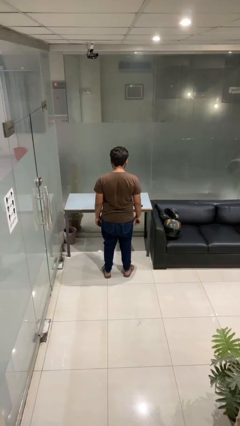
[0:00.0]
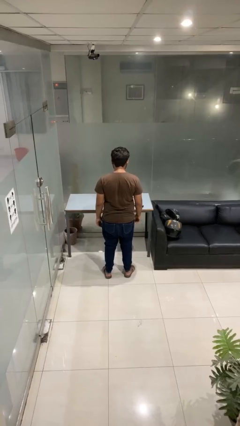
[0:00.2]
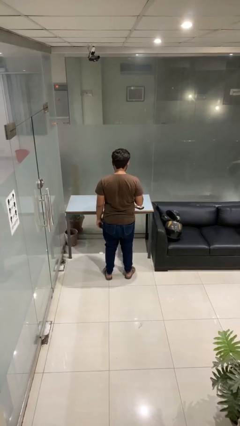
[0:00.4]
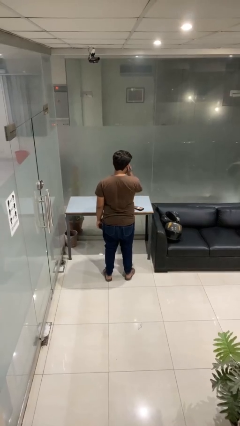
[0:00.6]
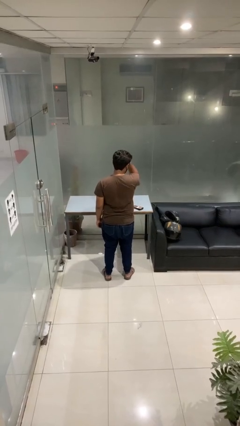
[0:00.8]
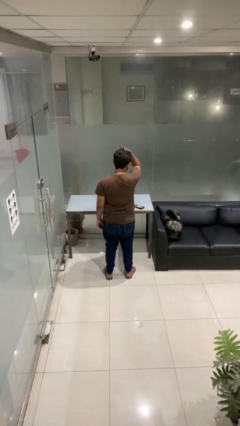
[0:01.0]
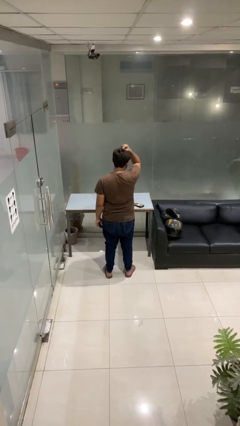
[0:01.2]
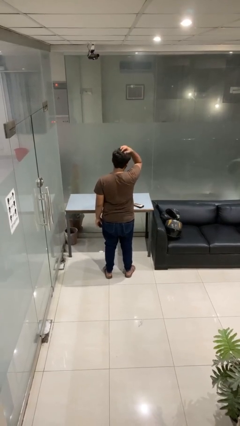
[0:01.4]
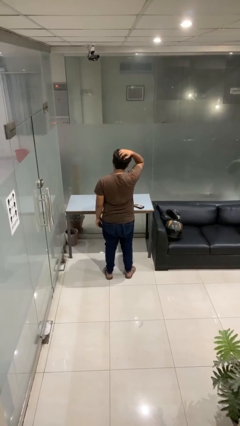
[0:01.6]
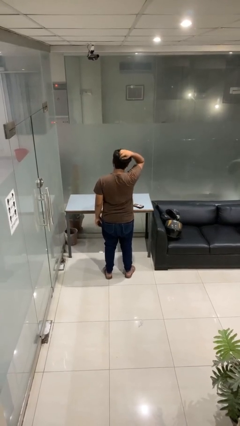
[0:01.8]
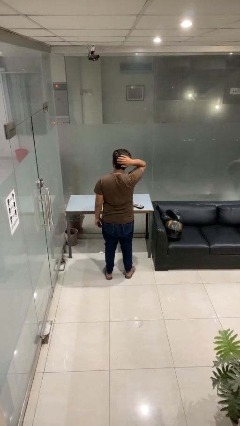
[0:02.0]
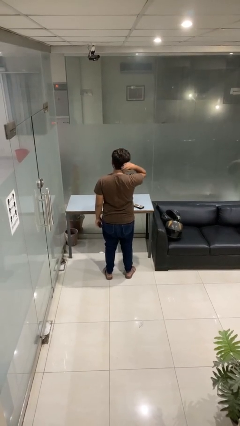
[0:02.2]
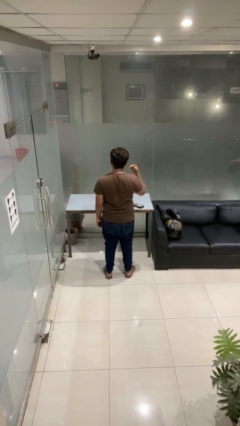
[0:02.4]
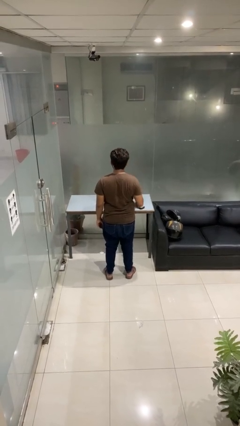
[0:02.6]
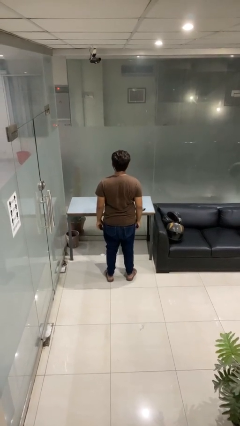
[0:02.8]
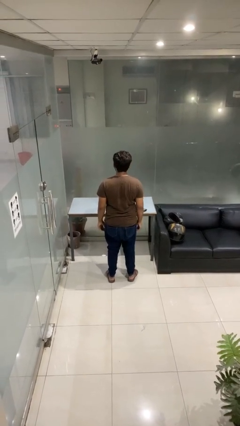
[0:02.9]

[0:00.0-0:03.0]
person strokes hair

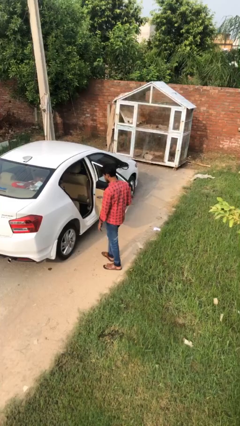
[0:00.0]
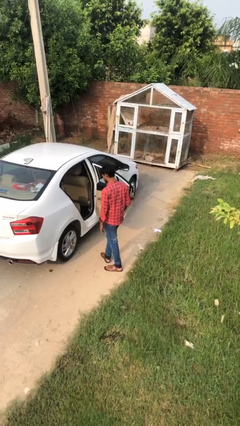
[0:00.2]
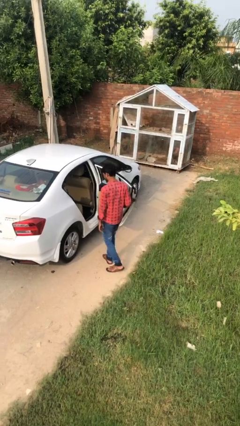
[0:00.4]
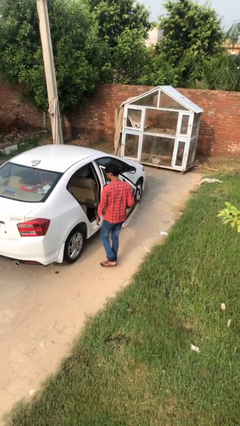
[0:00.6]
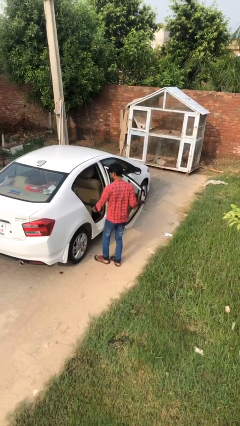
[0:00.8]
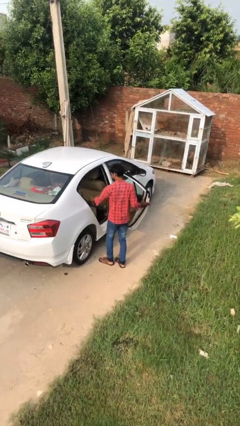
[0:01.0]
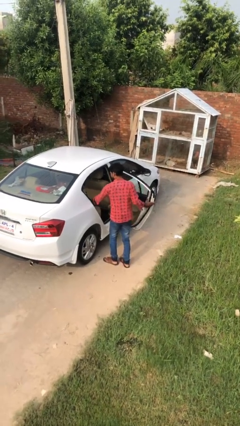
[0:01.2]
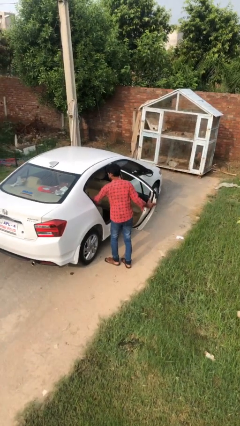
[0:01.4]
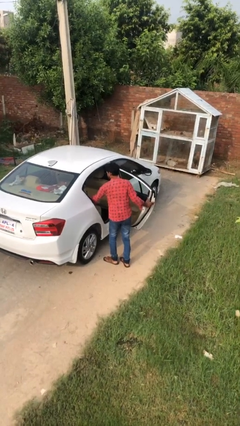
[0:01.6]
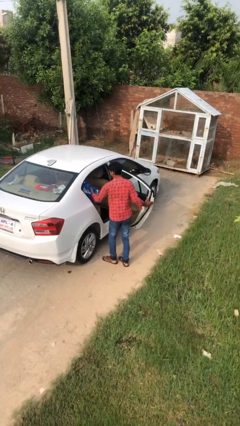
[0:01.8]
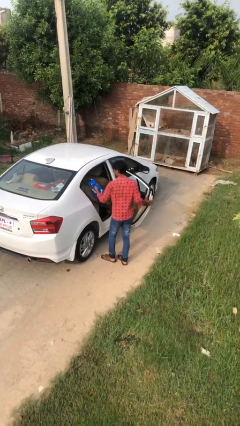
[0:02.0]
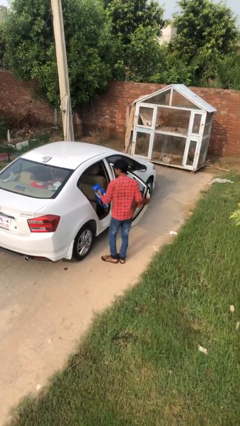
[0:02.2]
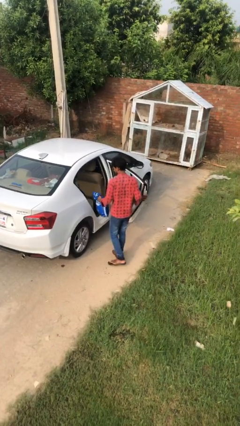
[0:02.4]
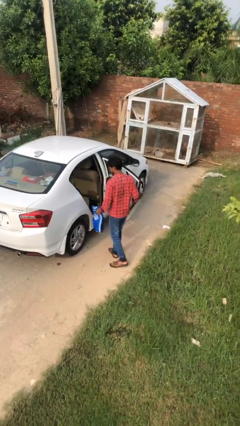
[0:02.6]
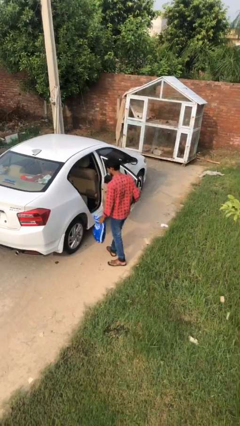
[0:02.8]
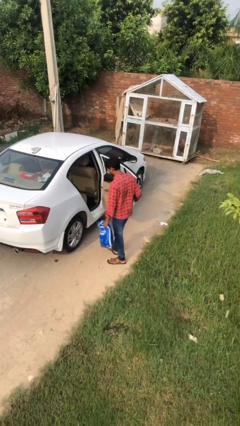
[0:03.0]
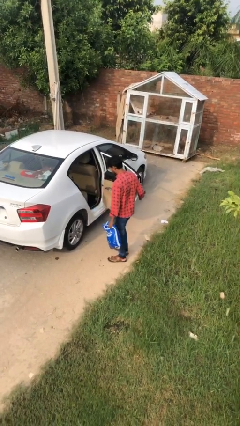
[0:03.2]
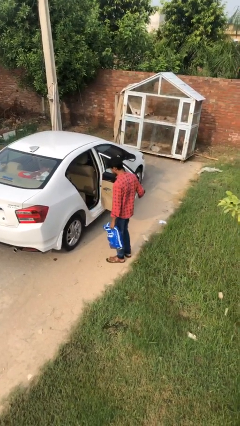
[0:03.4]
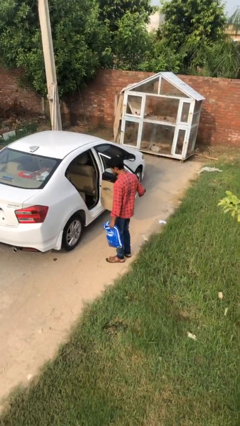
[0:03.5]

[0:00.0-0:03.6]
person unloads car

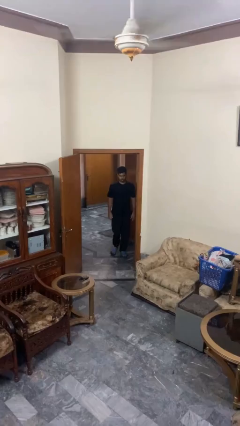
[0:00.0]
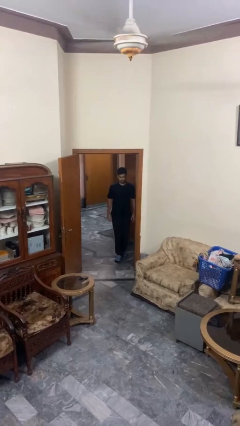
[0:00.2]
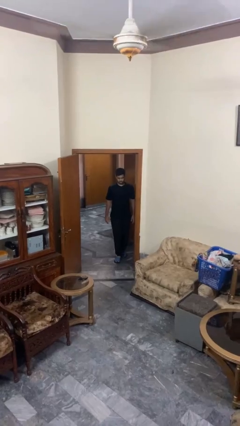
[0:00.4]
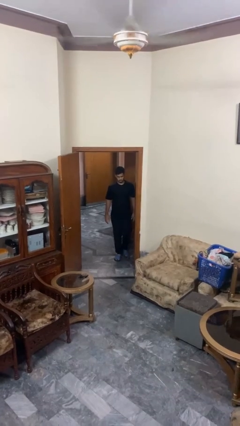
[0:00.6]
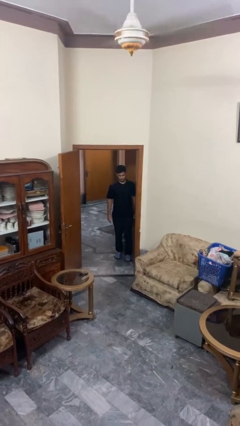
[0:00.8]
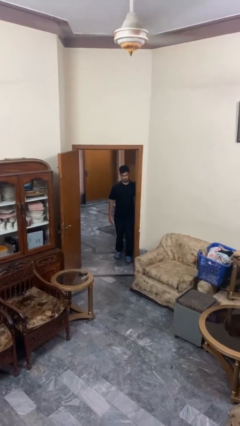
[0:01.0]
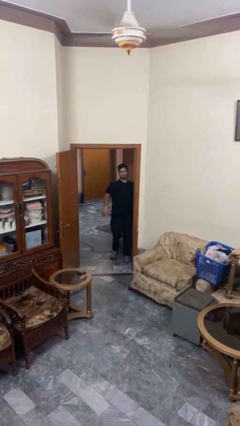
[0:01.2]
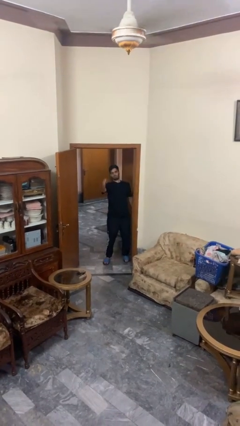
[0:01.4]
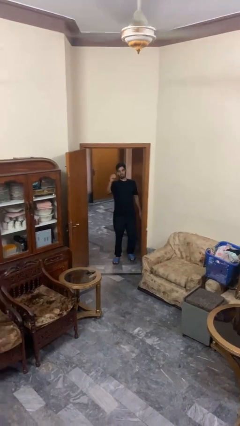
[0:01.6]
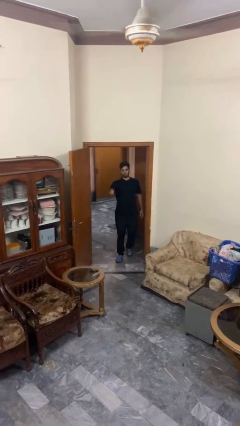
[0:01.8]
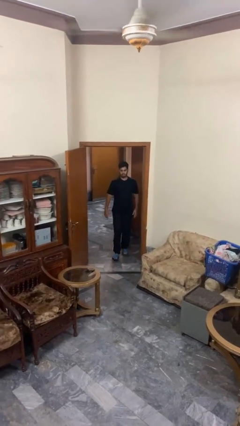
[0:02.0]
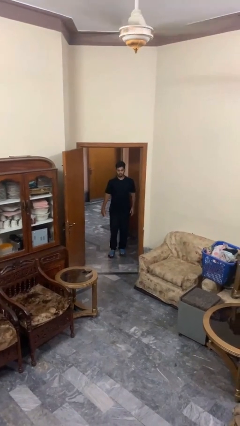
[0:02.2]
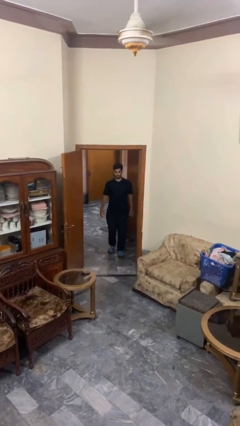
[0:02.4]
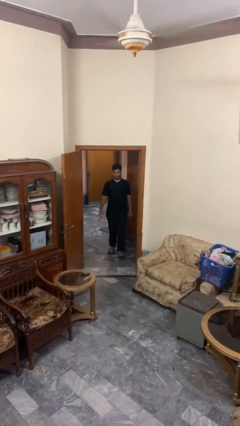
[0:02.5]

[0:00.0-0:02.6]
person bumps into wall

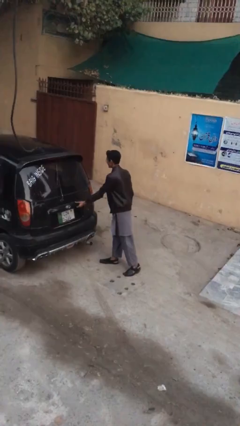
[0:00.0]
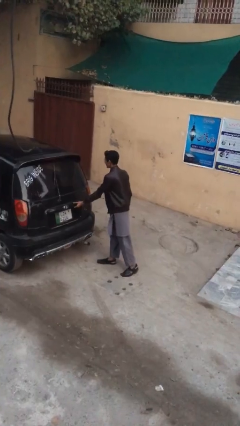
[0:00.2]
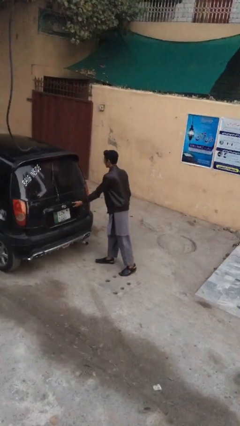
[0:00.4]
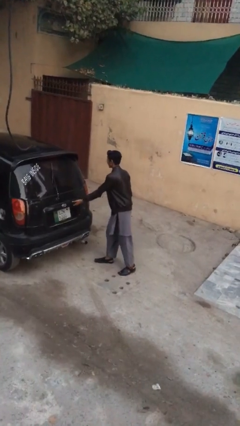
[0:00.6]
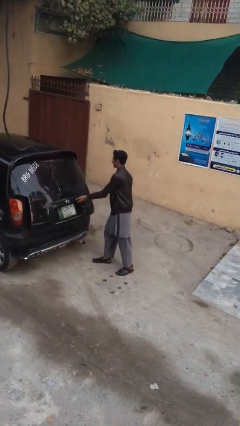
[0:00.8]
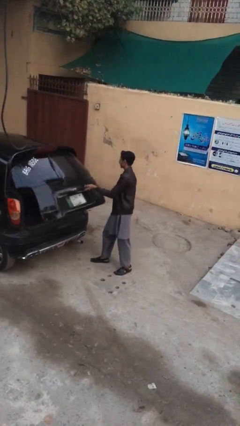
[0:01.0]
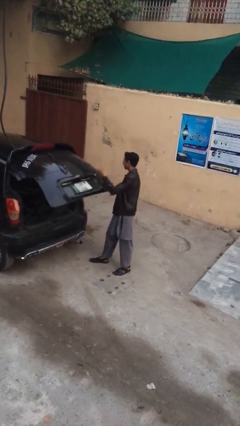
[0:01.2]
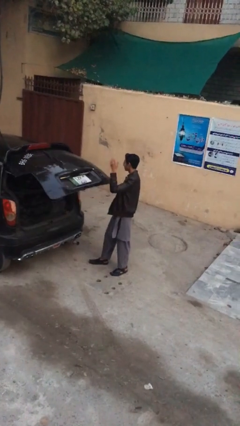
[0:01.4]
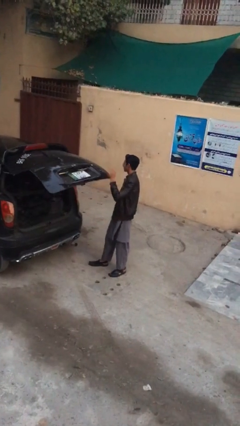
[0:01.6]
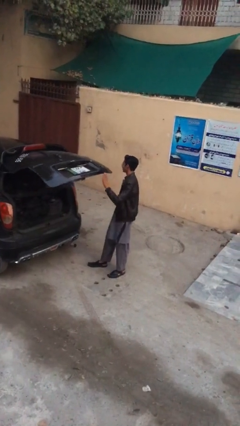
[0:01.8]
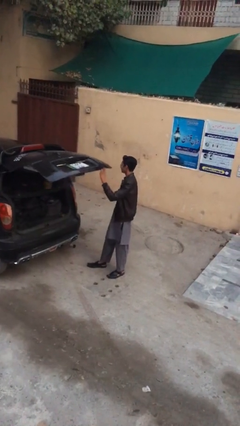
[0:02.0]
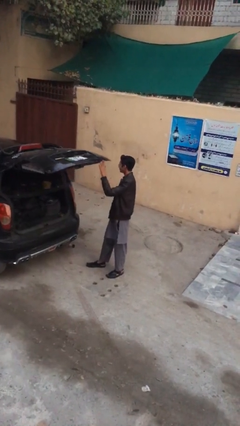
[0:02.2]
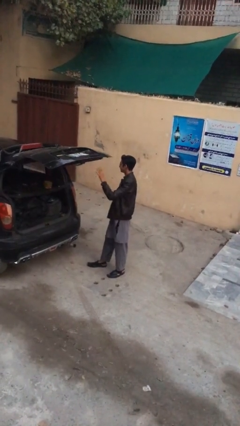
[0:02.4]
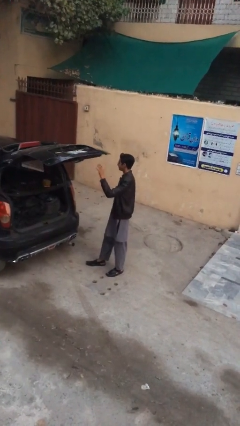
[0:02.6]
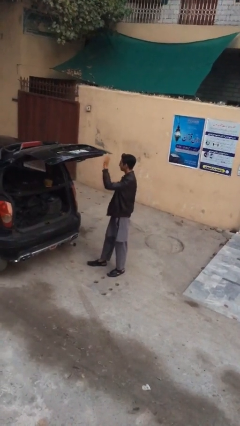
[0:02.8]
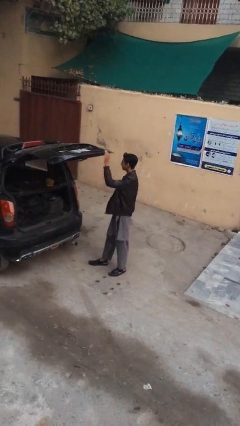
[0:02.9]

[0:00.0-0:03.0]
person opens car trunk

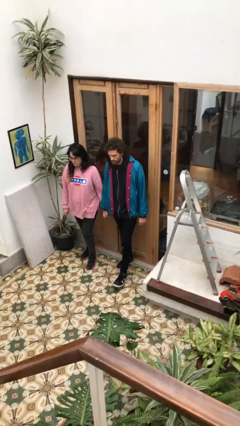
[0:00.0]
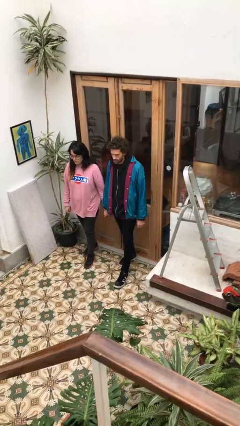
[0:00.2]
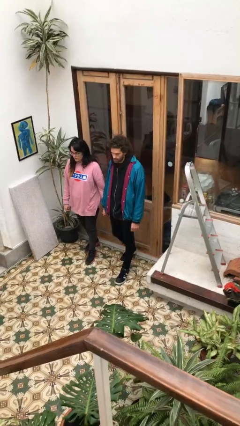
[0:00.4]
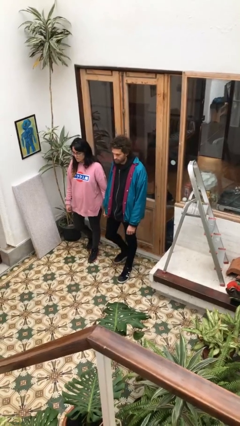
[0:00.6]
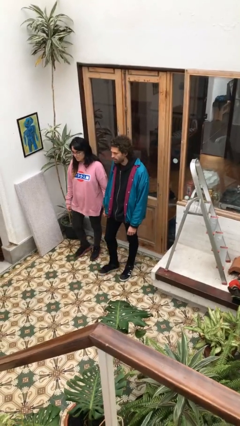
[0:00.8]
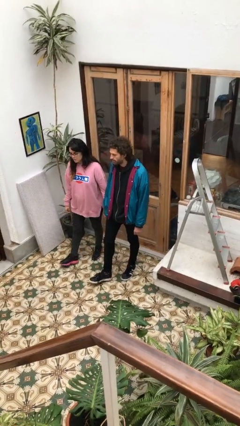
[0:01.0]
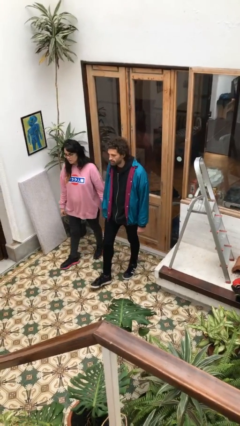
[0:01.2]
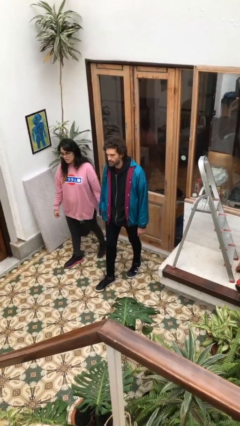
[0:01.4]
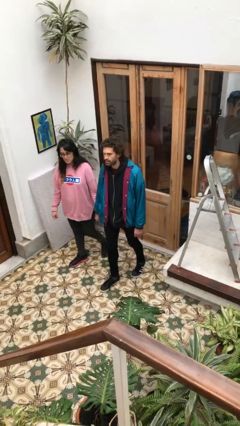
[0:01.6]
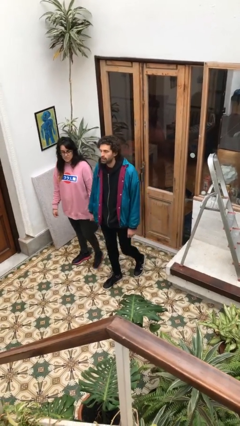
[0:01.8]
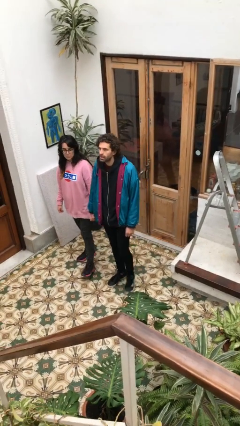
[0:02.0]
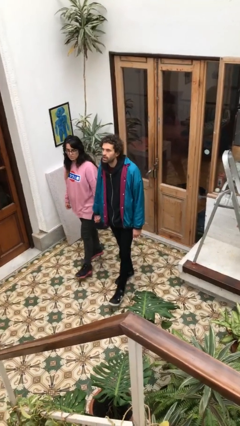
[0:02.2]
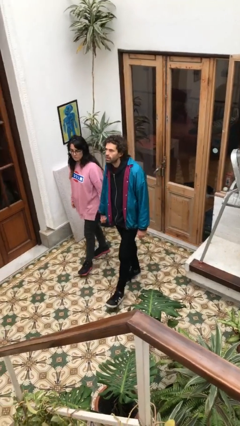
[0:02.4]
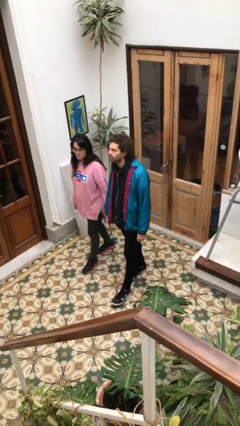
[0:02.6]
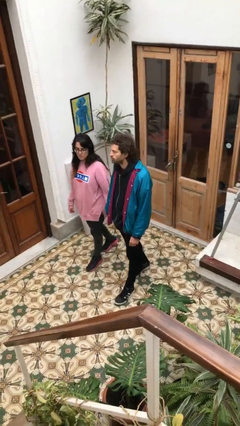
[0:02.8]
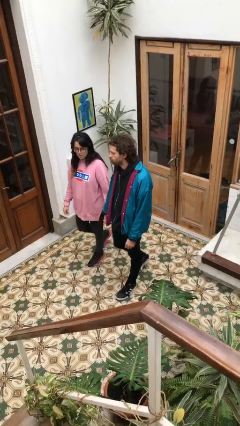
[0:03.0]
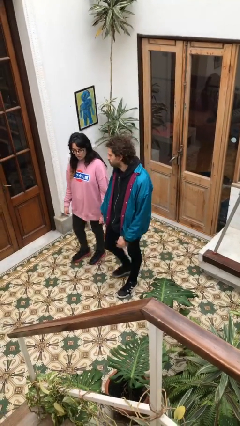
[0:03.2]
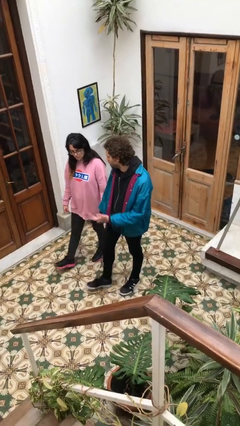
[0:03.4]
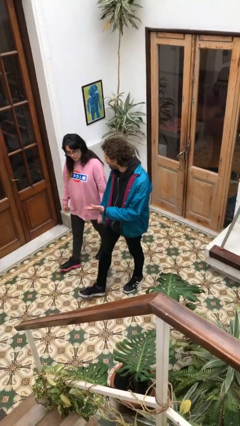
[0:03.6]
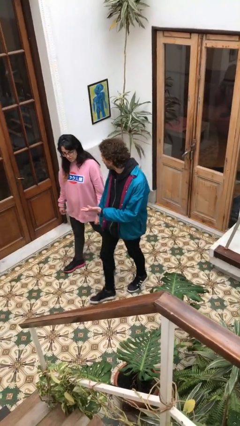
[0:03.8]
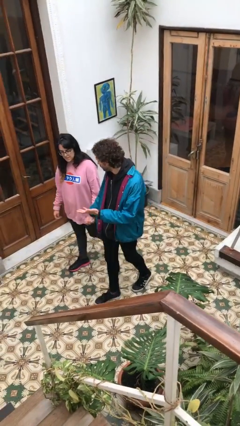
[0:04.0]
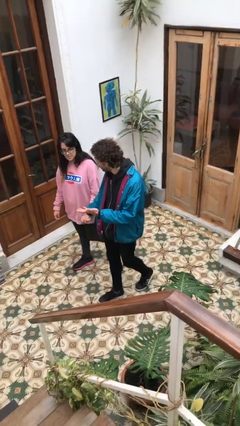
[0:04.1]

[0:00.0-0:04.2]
person holds hand

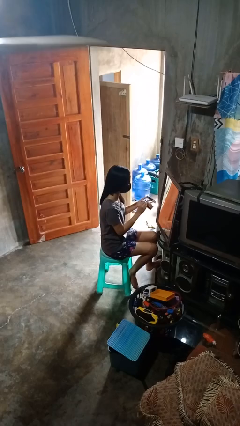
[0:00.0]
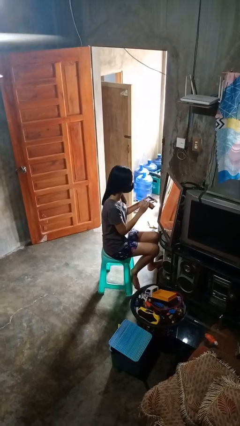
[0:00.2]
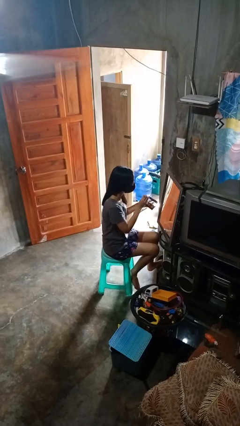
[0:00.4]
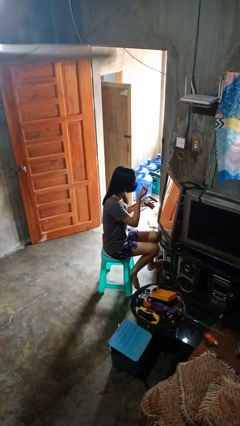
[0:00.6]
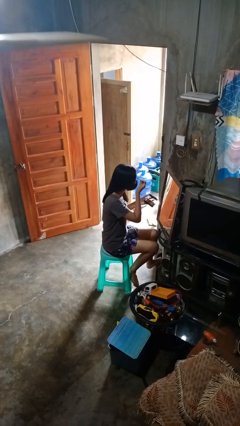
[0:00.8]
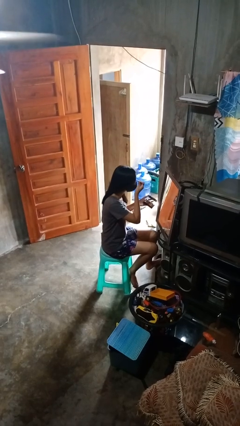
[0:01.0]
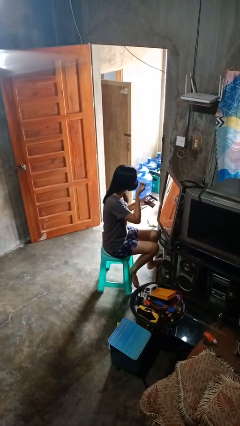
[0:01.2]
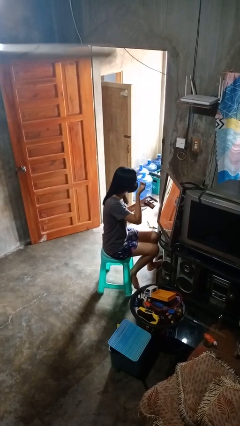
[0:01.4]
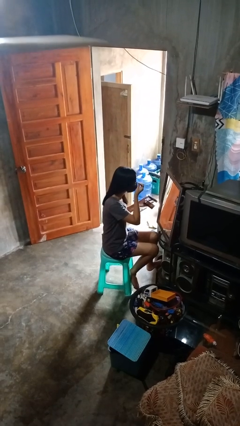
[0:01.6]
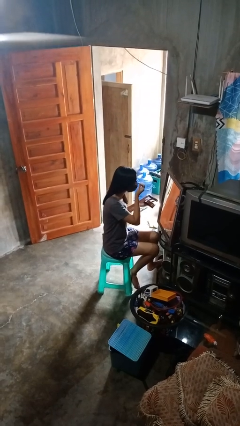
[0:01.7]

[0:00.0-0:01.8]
person applies eye makeup
